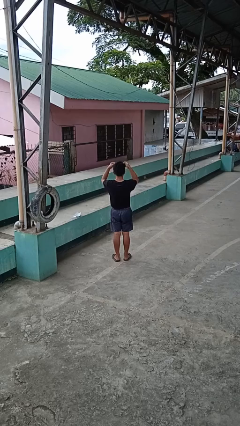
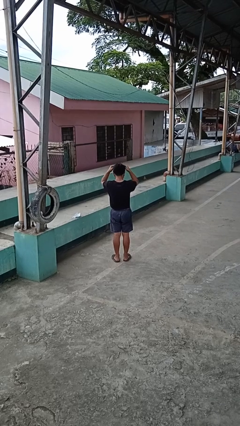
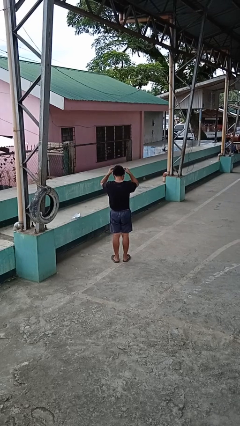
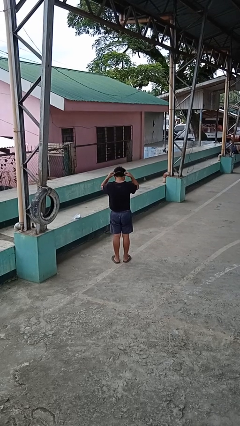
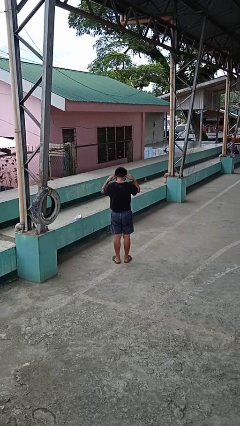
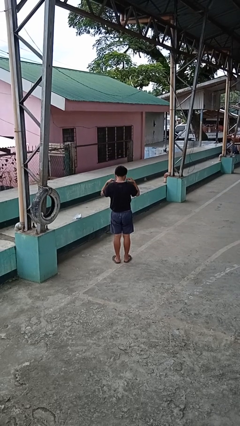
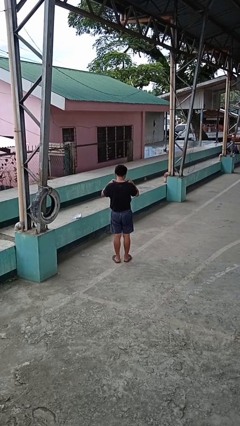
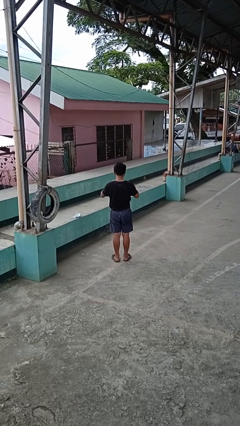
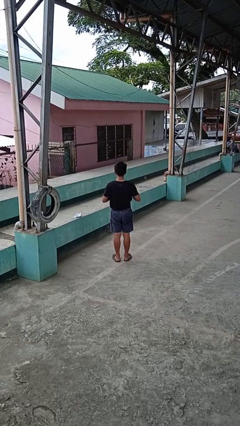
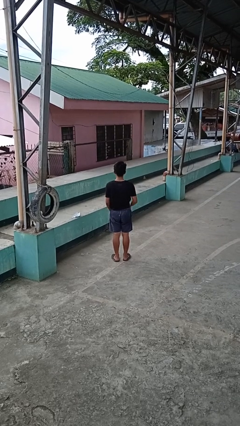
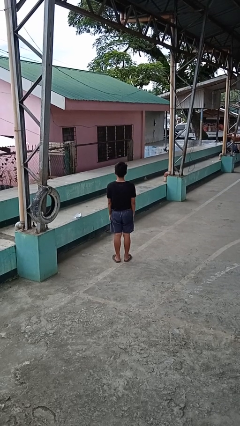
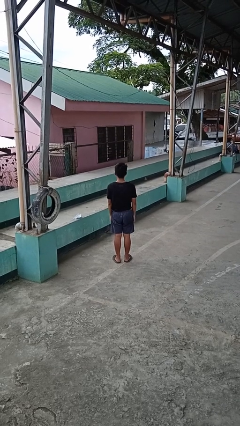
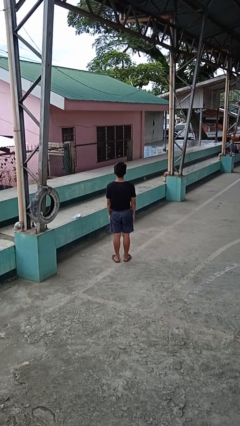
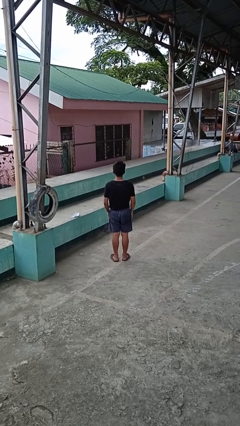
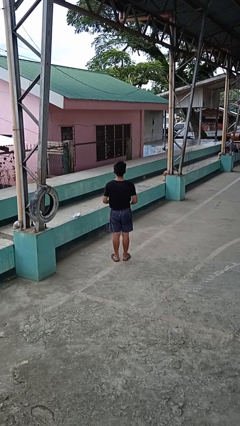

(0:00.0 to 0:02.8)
person puts on necklace

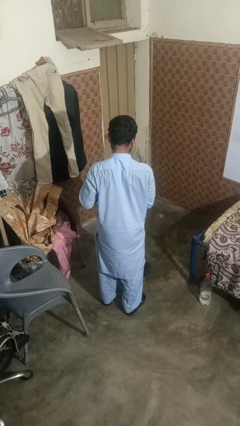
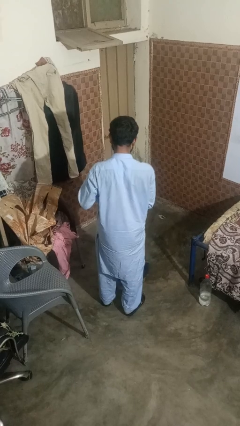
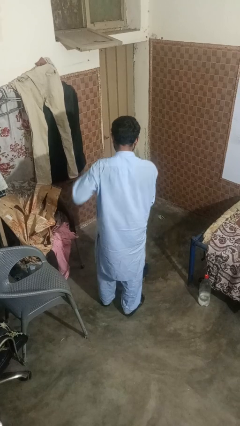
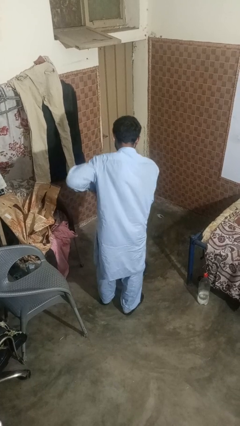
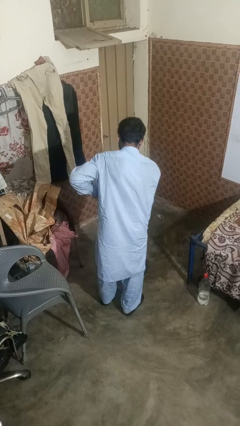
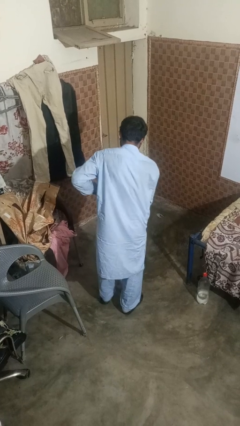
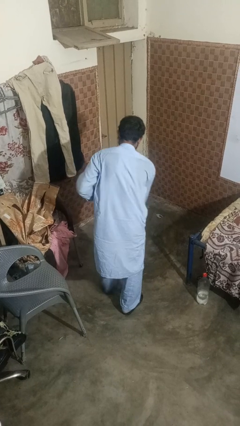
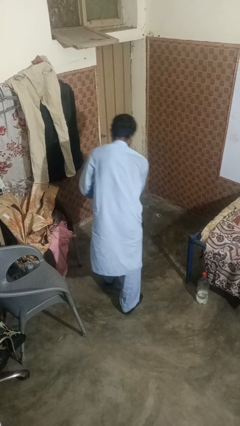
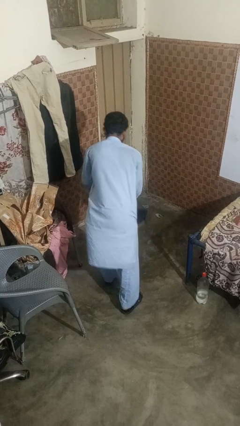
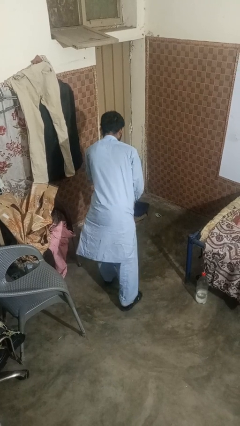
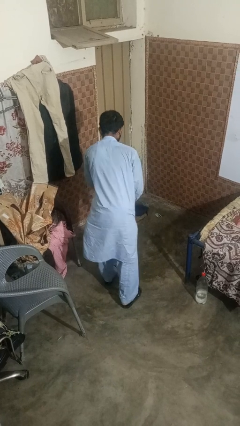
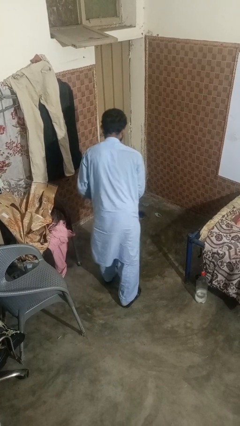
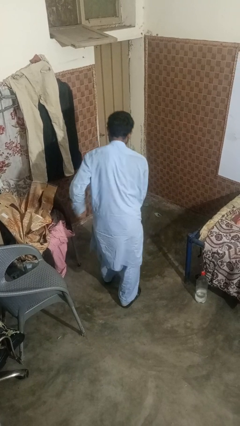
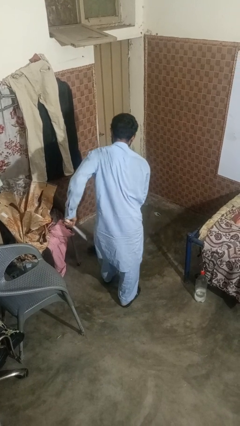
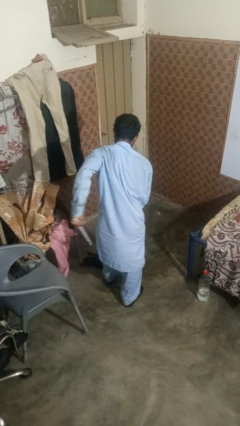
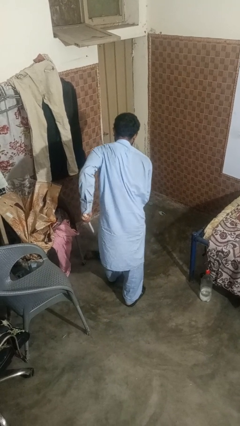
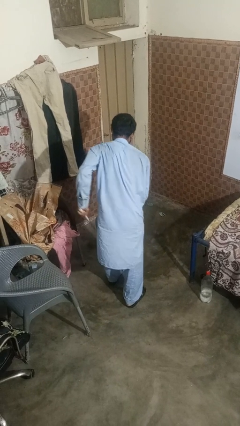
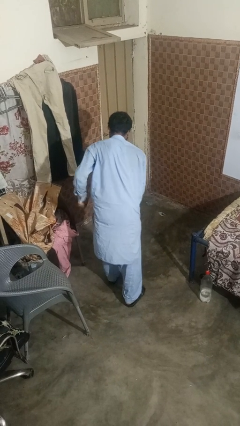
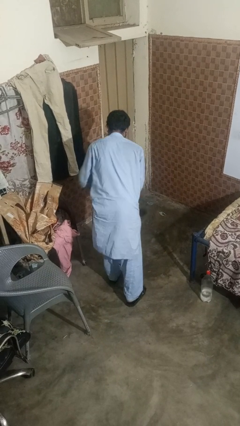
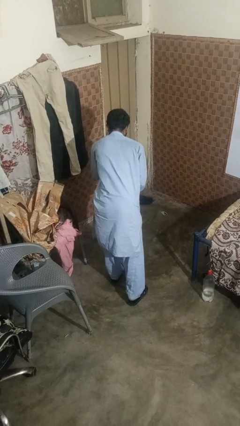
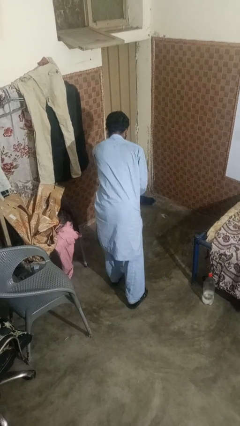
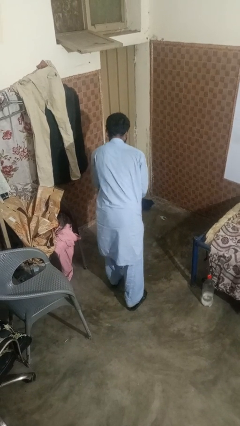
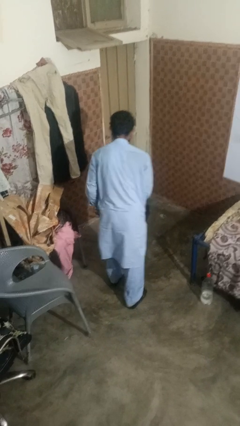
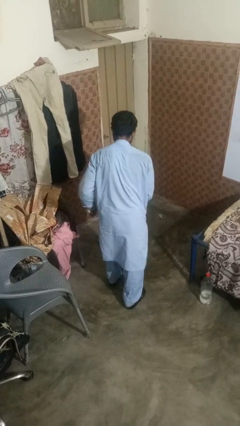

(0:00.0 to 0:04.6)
person mops

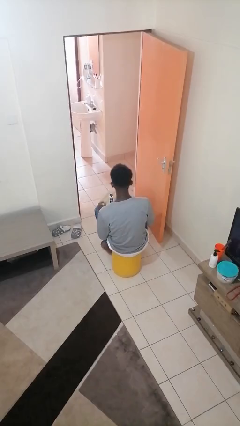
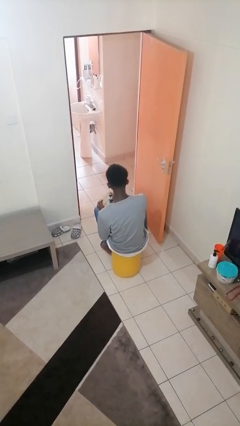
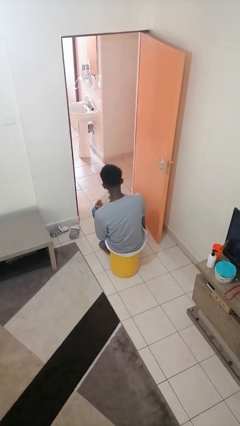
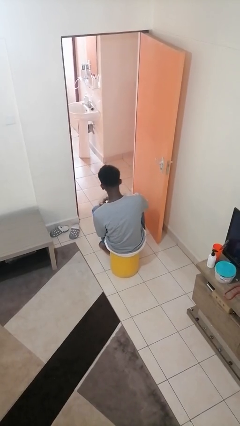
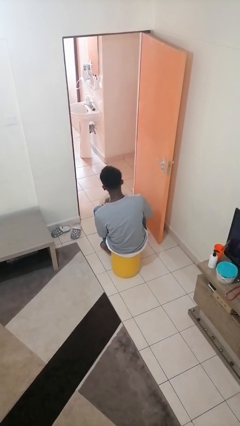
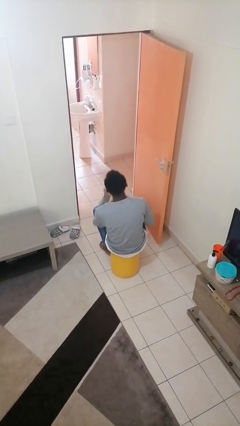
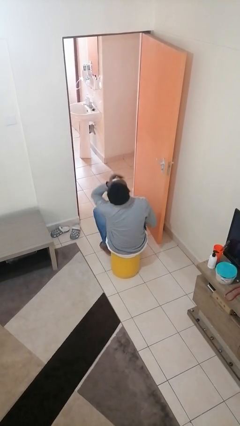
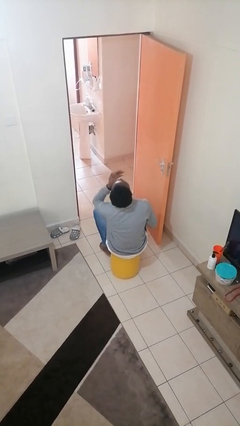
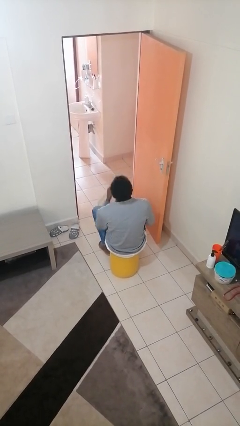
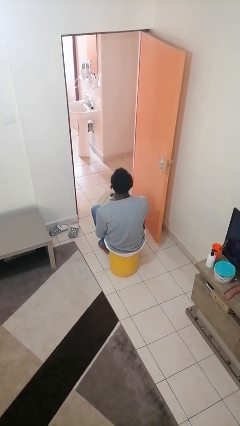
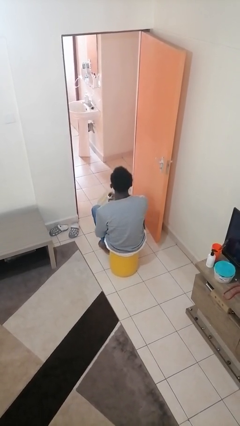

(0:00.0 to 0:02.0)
person takes medicine pills

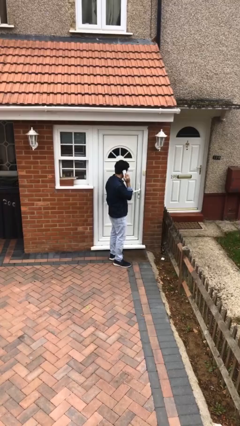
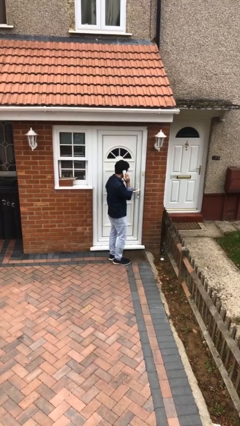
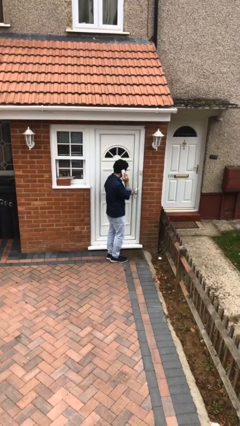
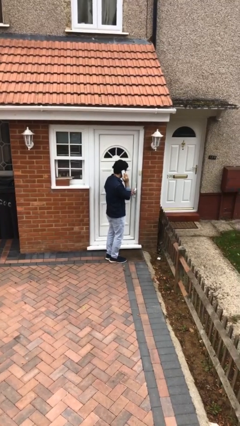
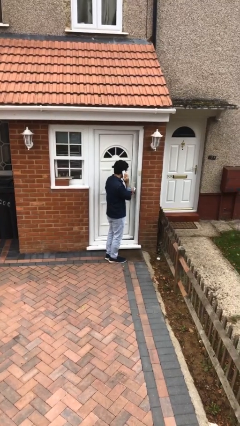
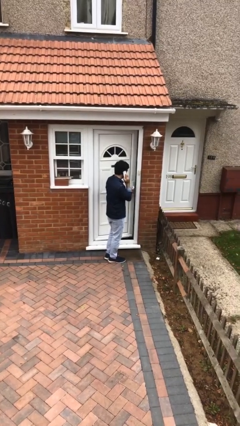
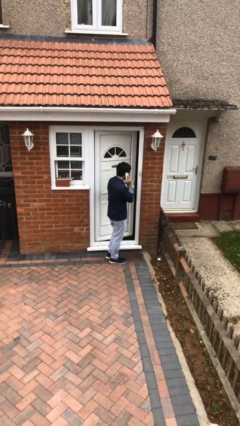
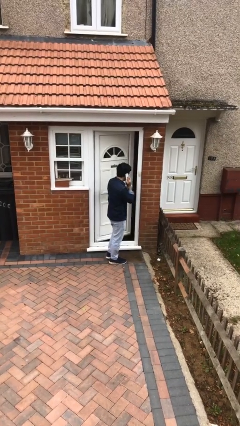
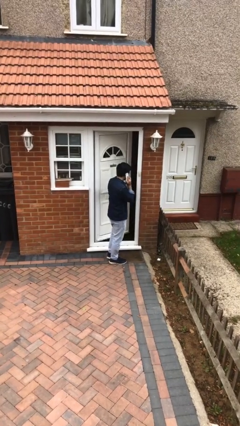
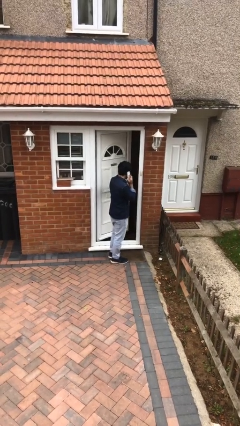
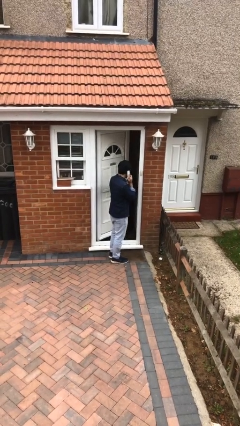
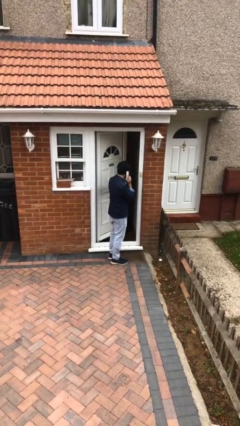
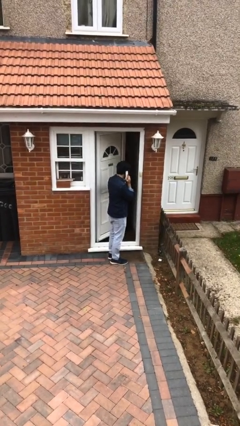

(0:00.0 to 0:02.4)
person opens facility door

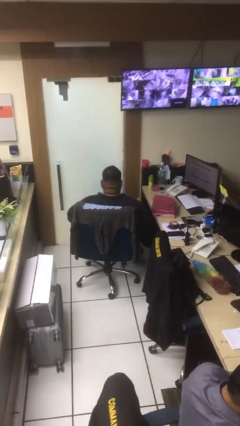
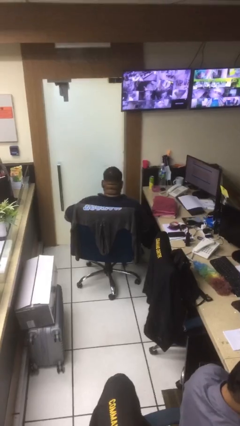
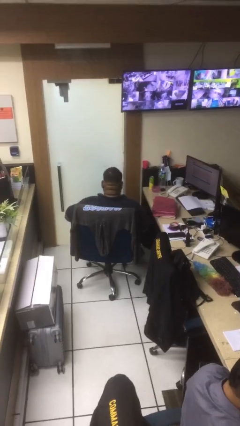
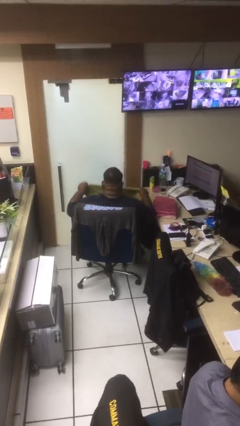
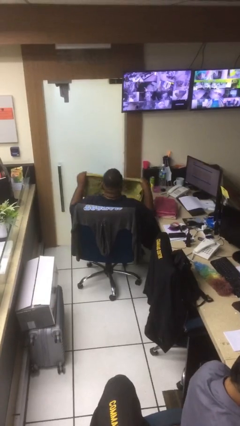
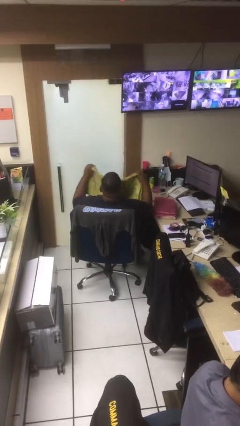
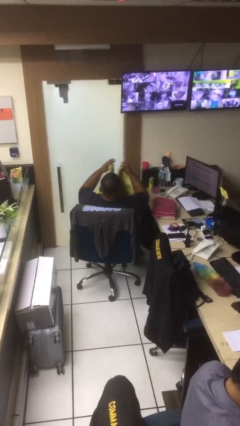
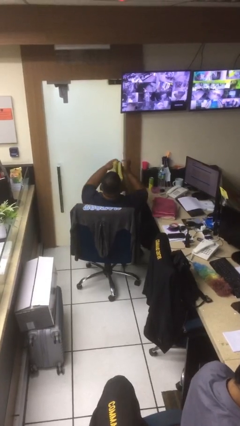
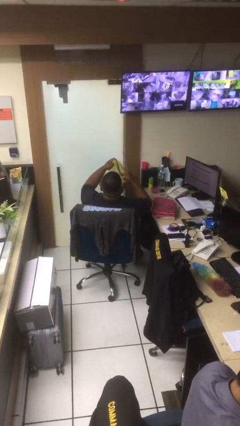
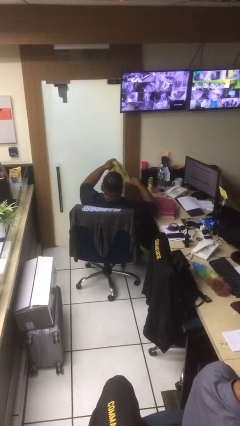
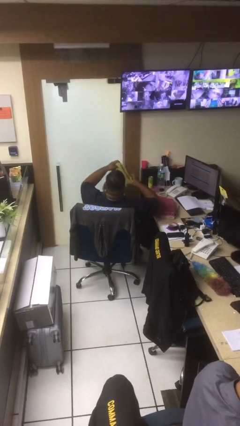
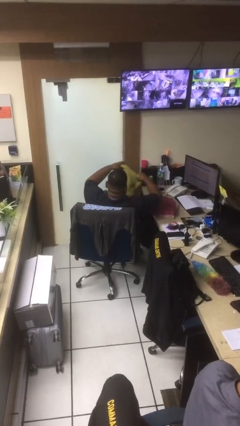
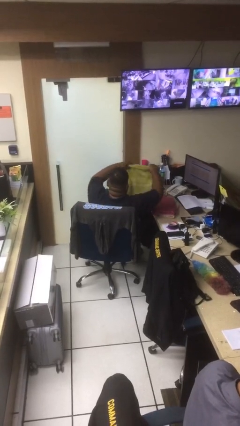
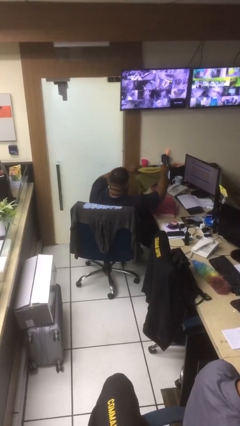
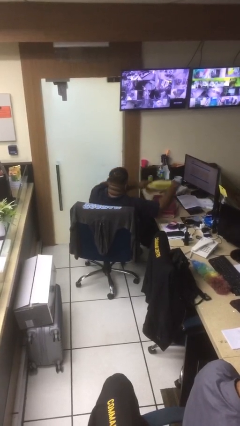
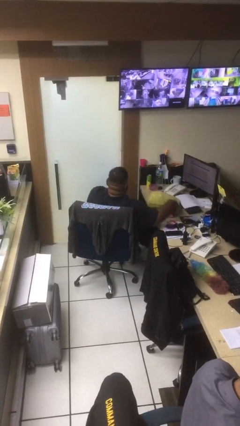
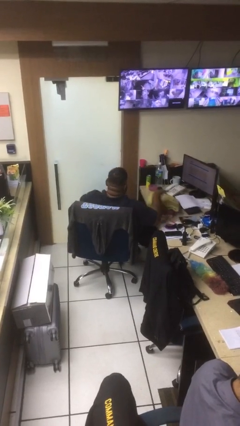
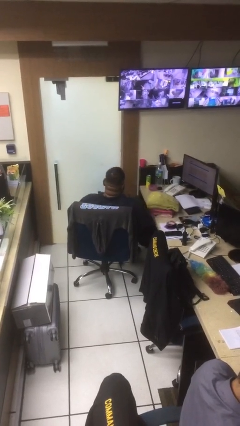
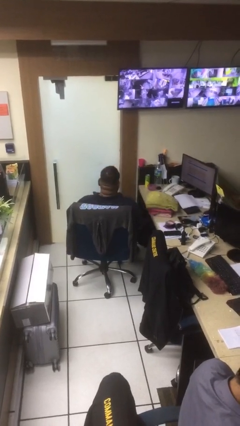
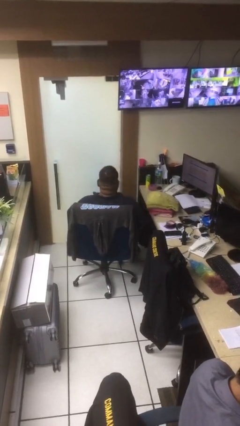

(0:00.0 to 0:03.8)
person folds towel

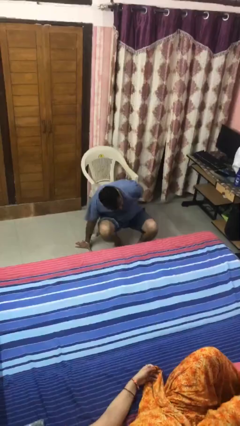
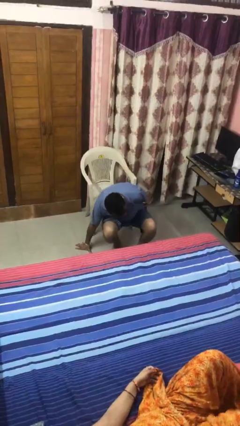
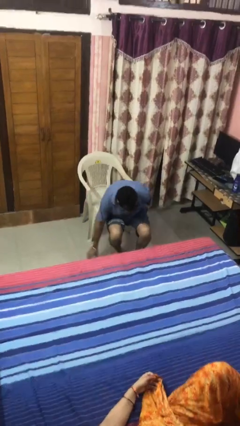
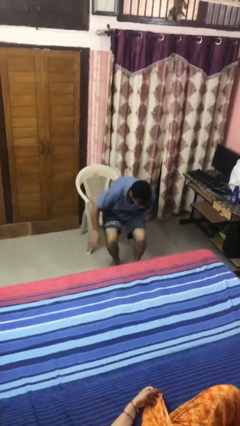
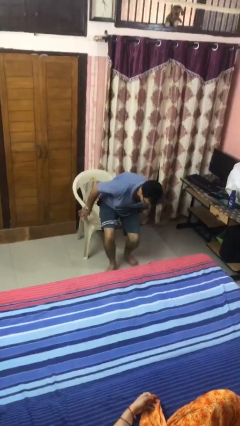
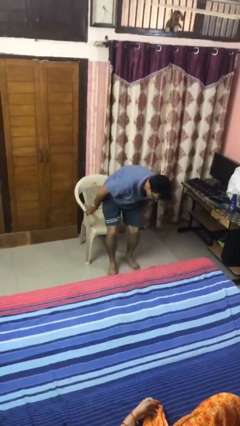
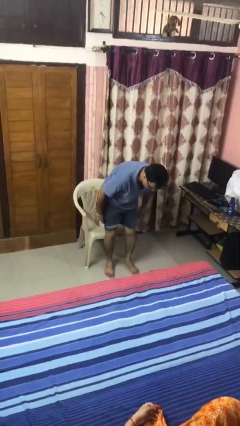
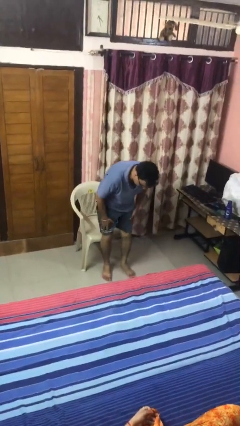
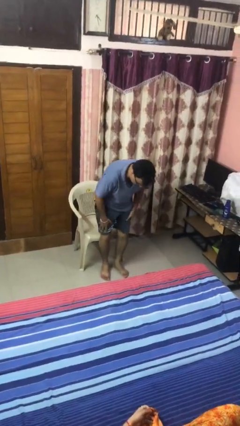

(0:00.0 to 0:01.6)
person stands up from floor
